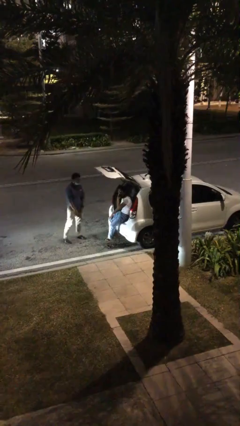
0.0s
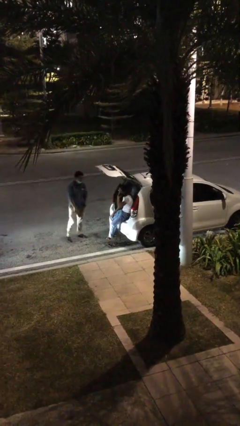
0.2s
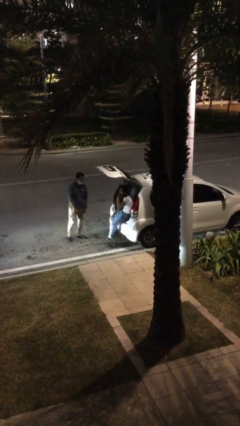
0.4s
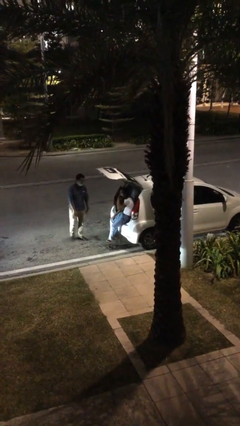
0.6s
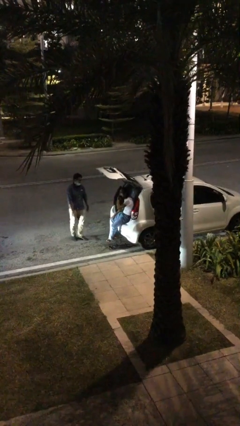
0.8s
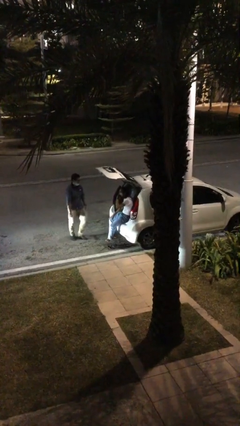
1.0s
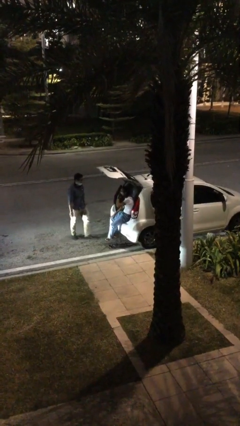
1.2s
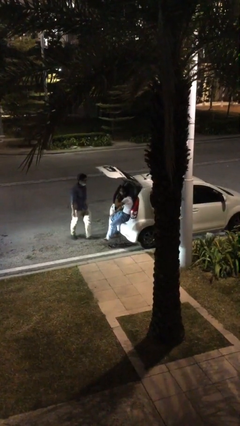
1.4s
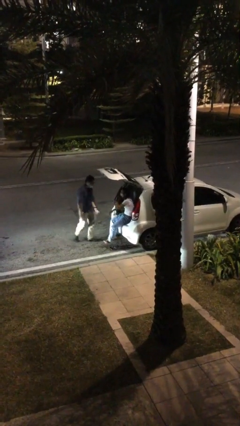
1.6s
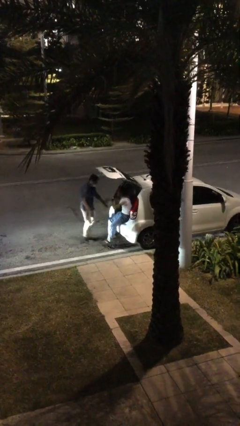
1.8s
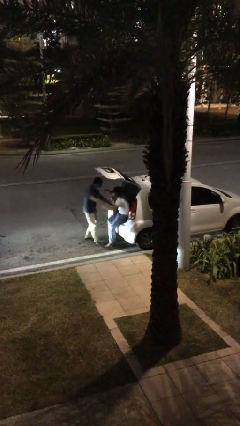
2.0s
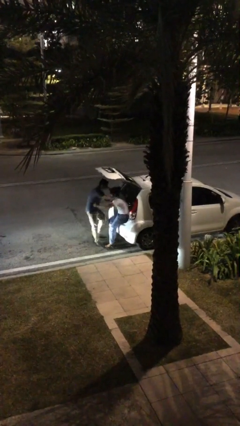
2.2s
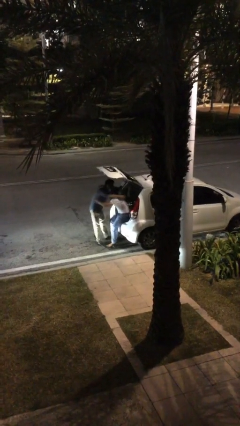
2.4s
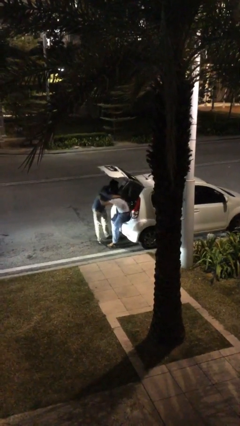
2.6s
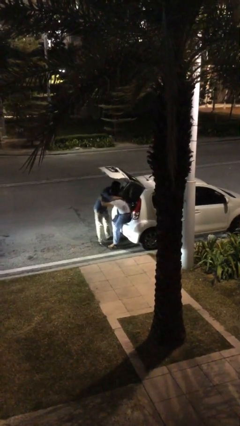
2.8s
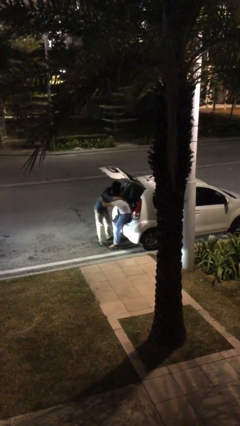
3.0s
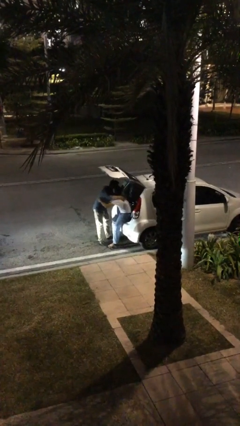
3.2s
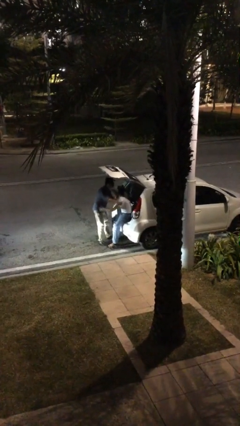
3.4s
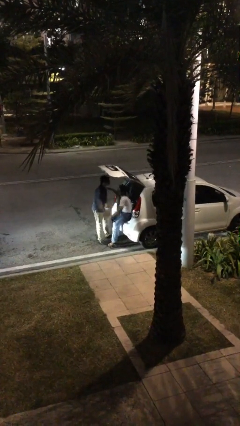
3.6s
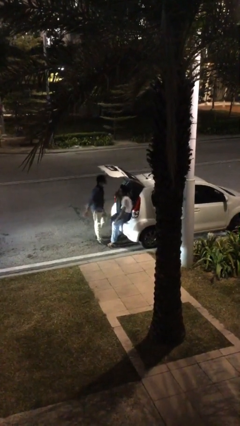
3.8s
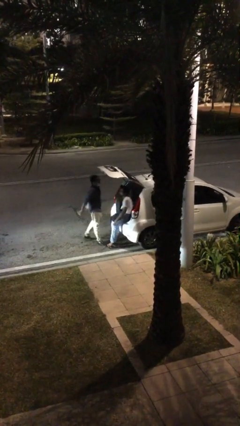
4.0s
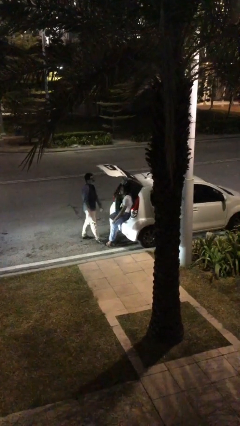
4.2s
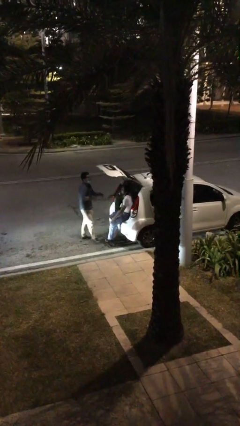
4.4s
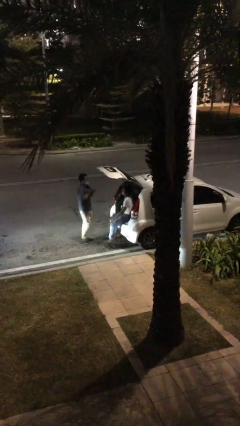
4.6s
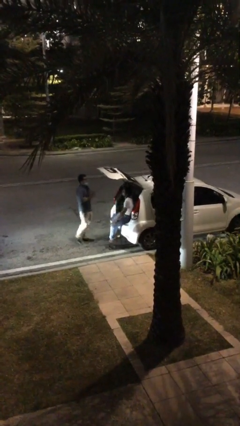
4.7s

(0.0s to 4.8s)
person embraces person

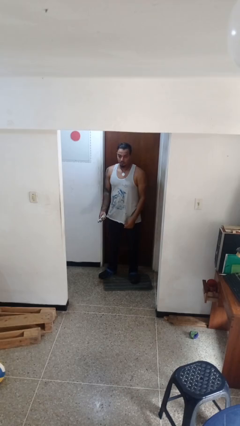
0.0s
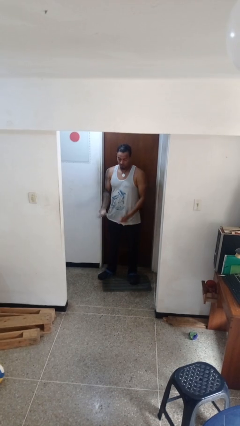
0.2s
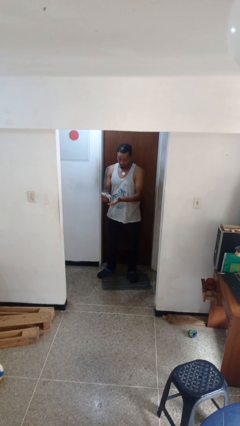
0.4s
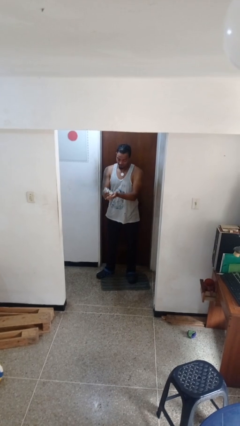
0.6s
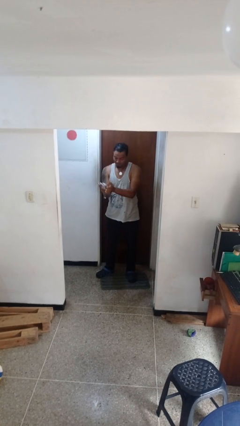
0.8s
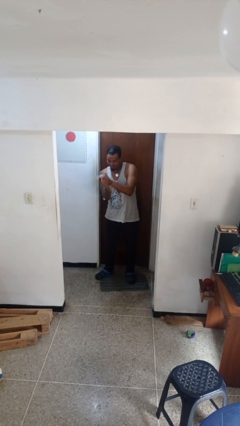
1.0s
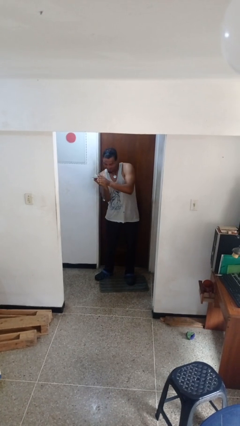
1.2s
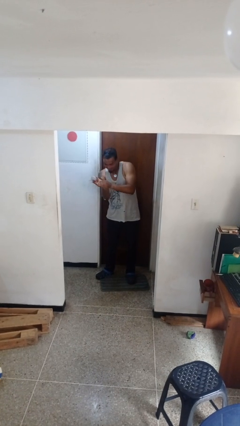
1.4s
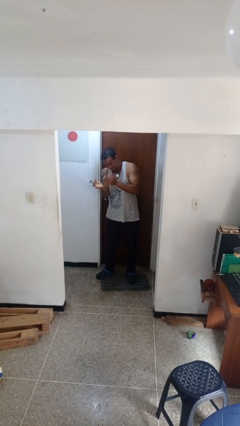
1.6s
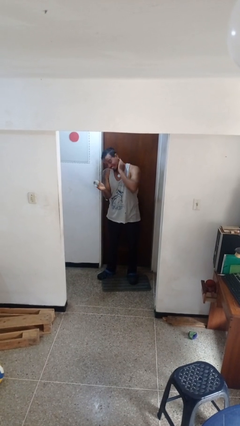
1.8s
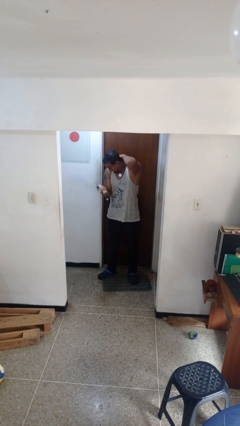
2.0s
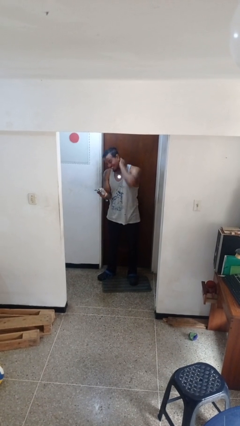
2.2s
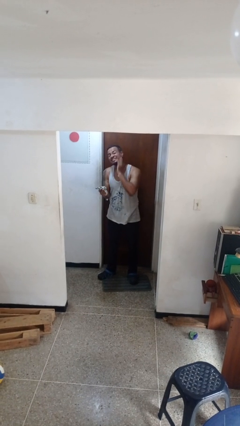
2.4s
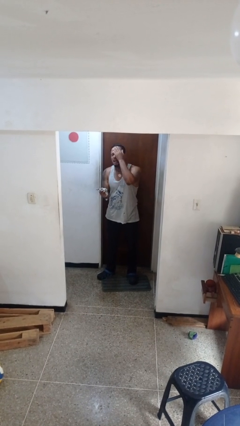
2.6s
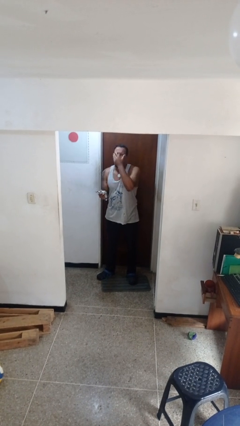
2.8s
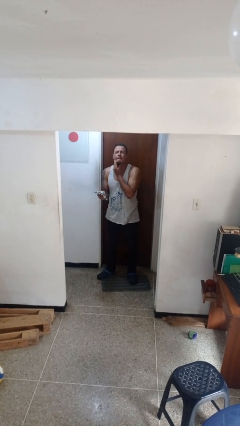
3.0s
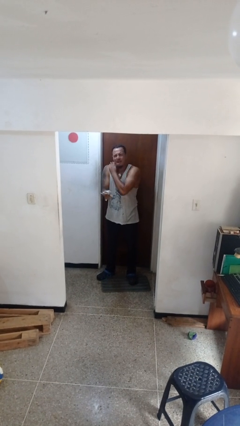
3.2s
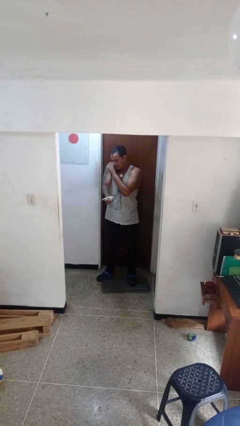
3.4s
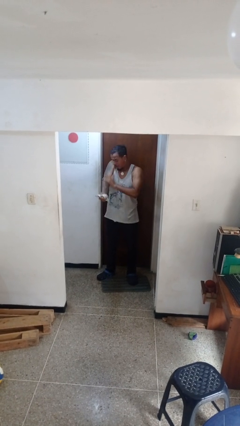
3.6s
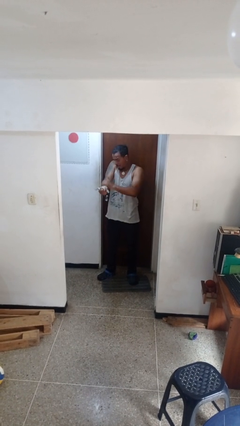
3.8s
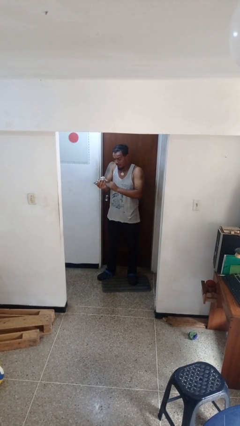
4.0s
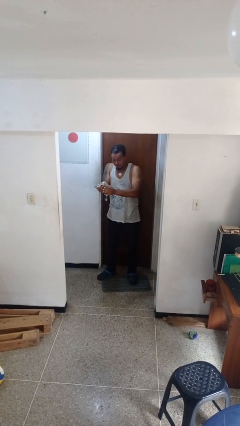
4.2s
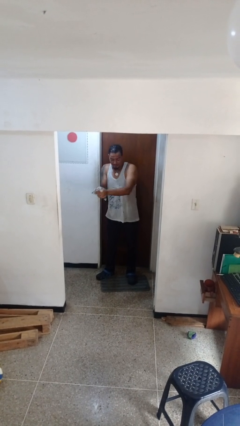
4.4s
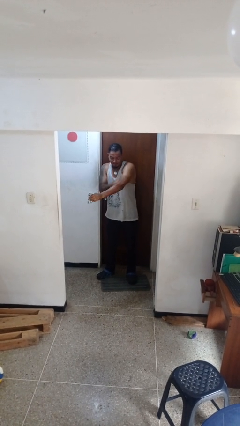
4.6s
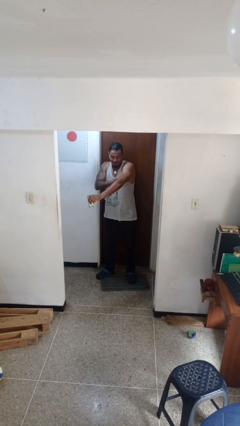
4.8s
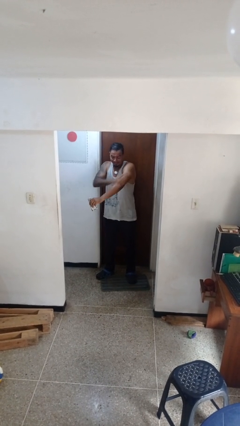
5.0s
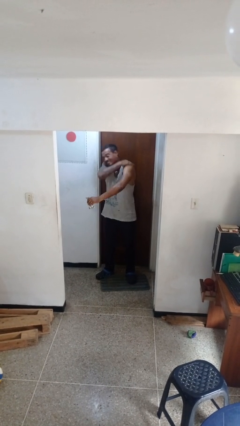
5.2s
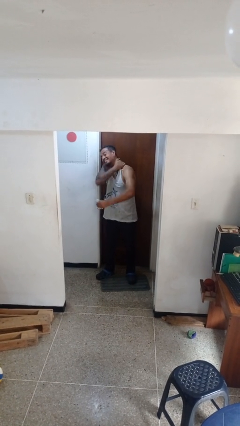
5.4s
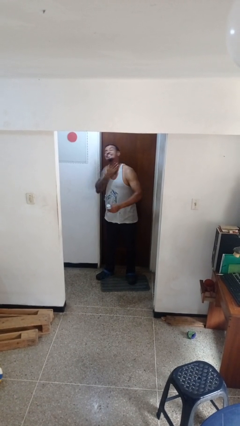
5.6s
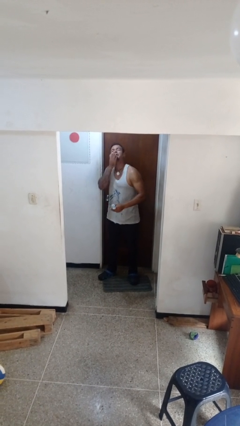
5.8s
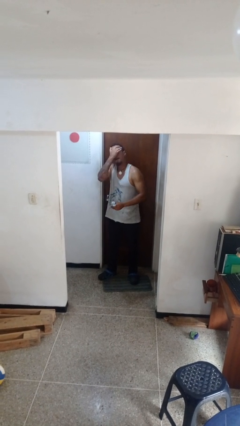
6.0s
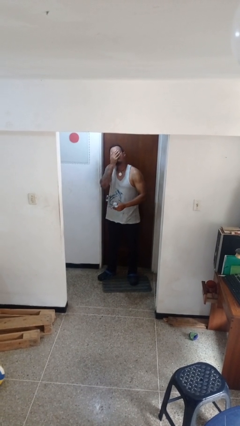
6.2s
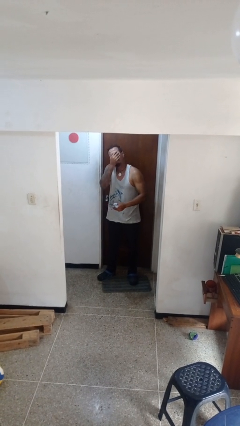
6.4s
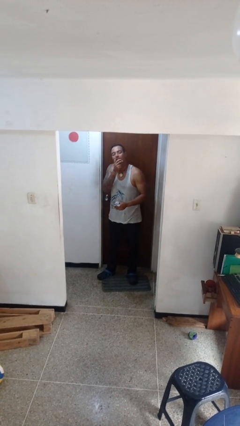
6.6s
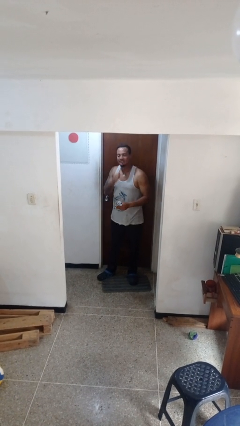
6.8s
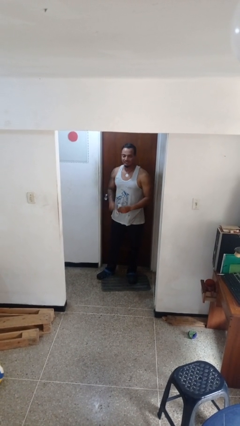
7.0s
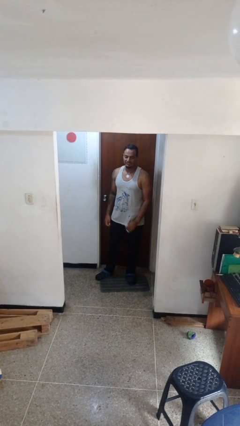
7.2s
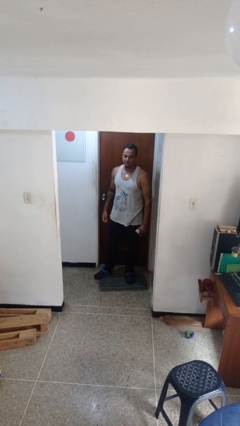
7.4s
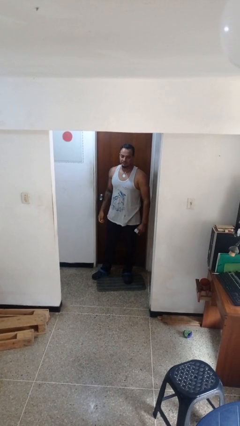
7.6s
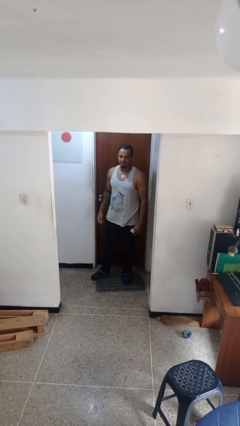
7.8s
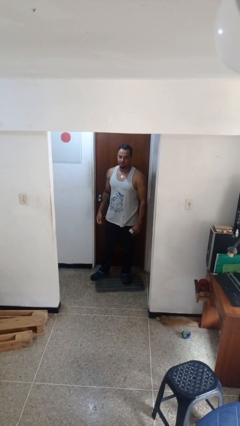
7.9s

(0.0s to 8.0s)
person applies sunscreen

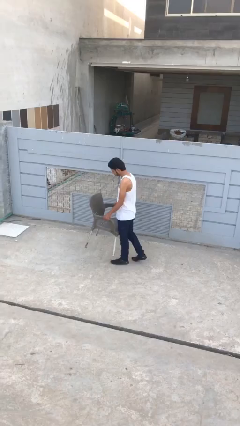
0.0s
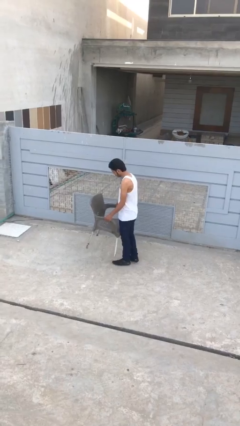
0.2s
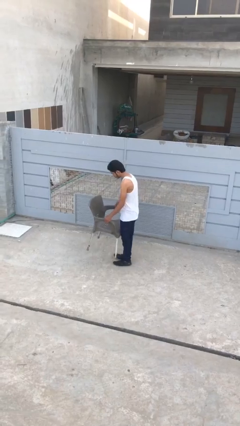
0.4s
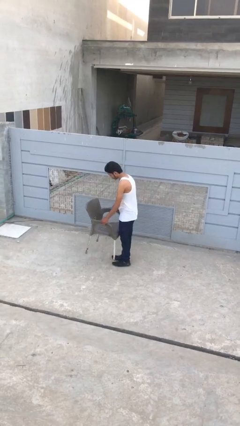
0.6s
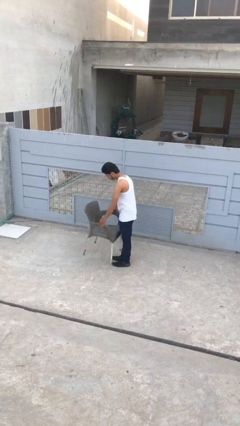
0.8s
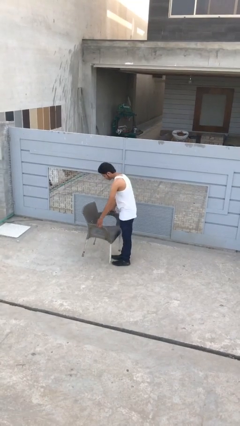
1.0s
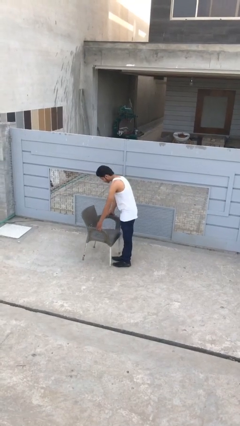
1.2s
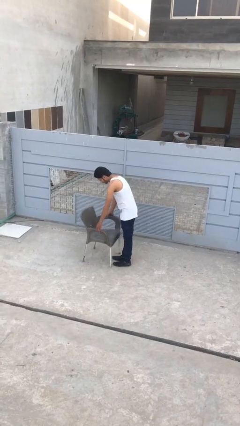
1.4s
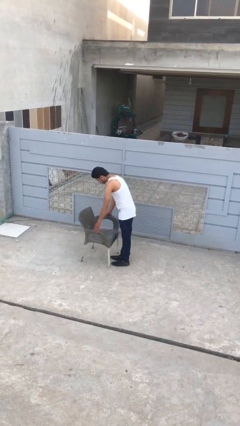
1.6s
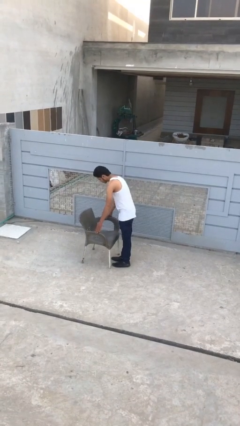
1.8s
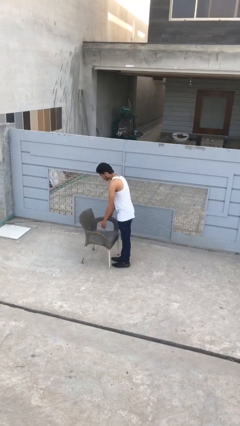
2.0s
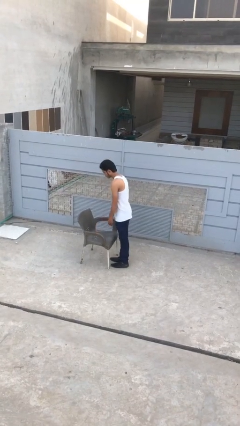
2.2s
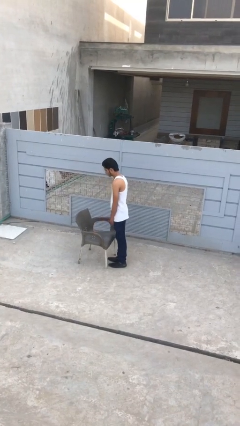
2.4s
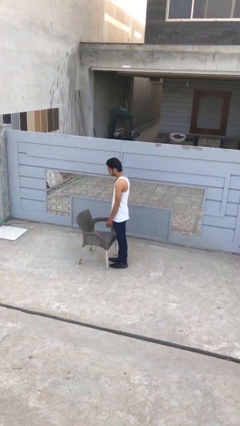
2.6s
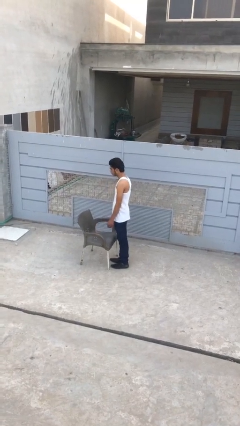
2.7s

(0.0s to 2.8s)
person puts down object on floor

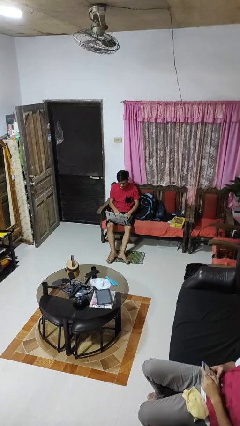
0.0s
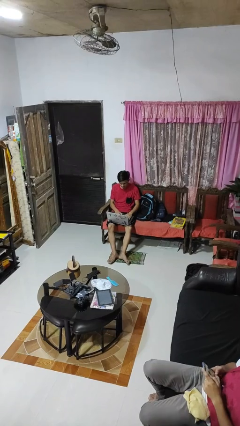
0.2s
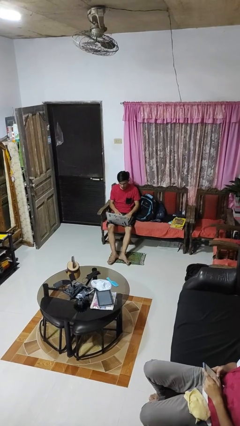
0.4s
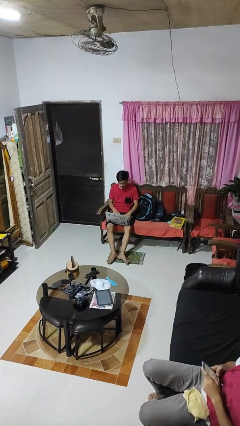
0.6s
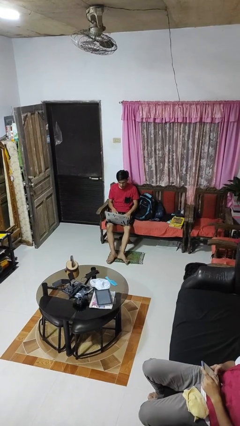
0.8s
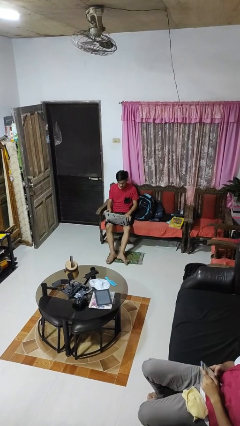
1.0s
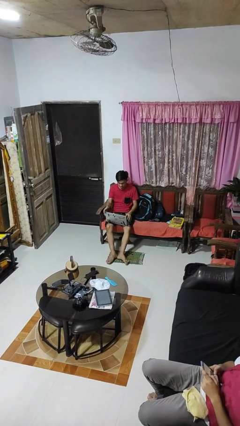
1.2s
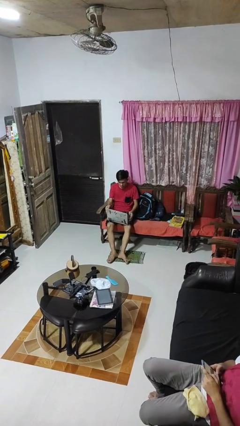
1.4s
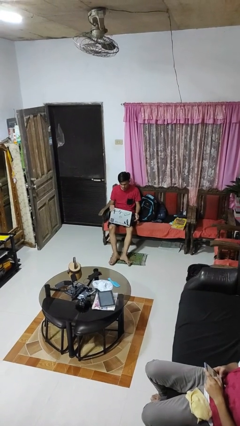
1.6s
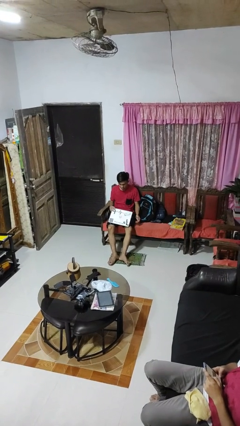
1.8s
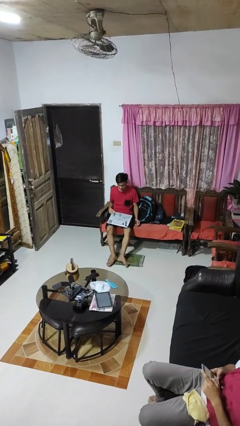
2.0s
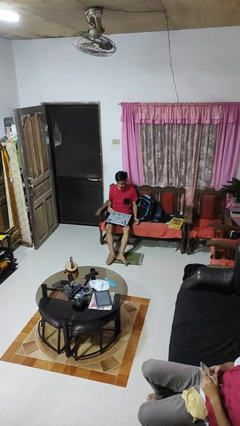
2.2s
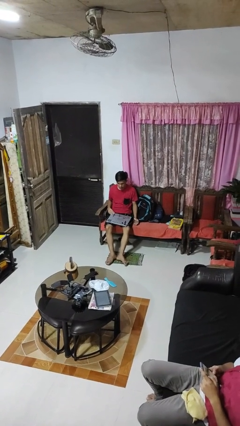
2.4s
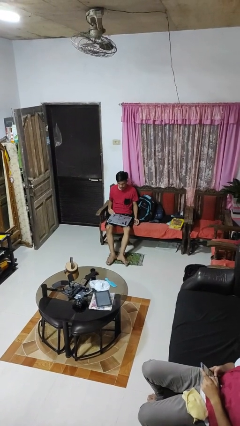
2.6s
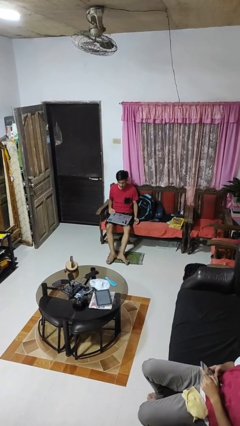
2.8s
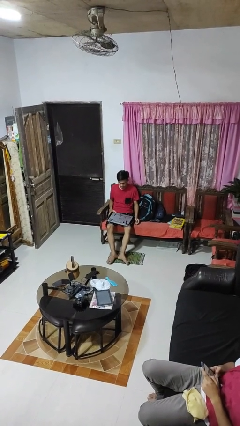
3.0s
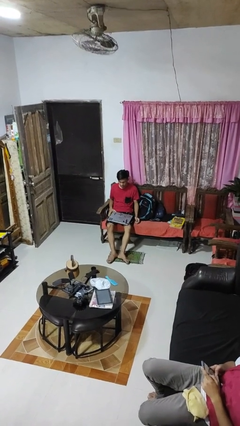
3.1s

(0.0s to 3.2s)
person closes laptop
